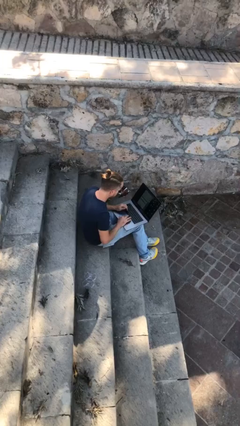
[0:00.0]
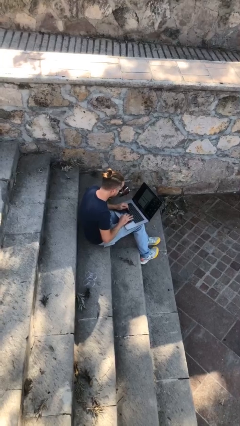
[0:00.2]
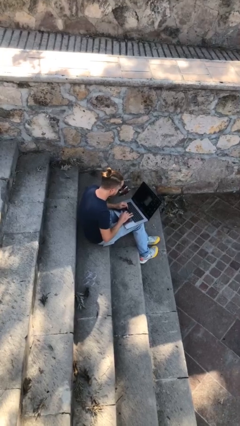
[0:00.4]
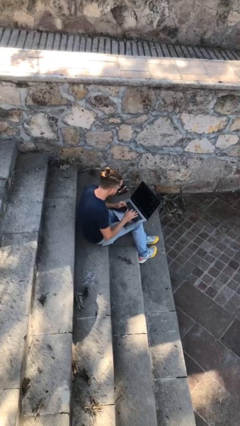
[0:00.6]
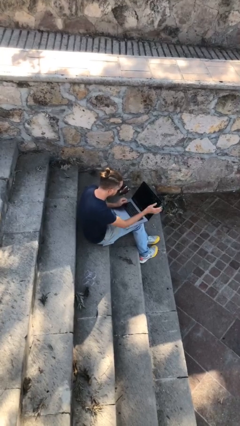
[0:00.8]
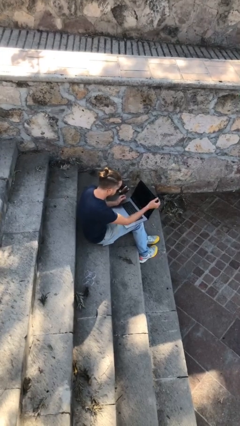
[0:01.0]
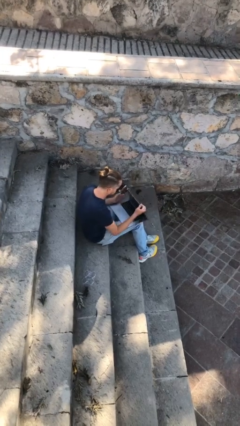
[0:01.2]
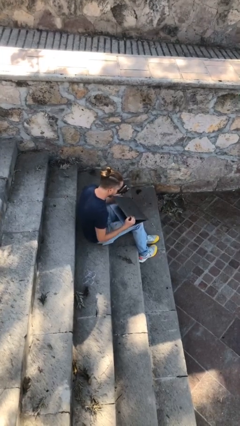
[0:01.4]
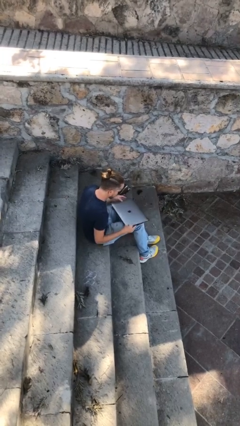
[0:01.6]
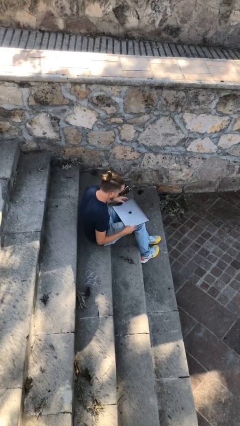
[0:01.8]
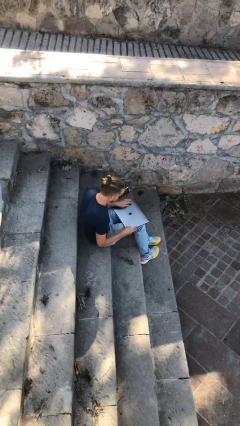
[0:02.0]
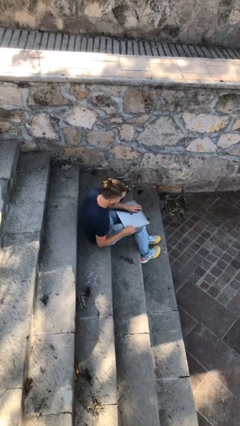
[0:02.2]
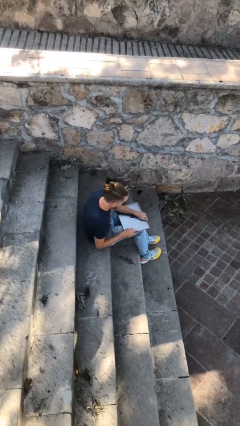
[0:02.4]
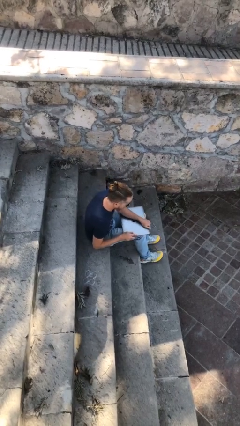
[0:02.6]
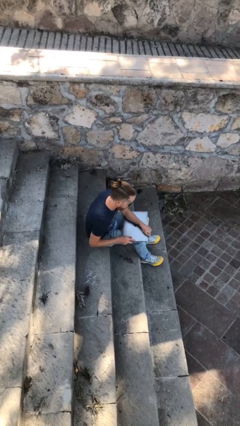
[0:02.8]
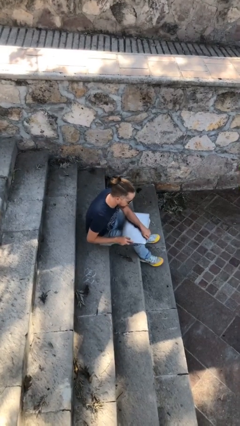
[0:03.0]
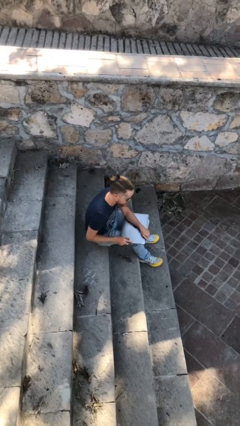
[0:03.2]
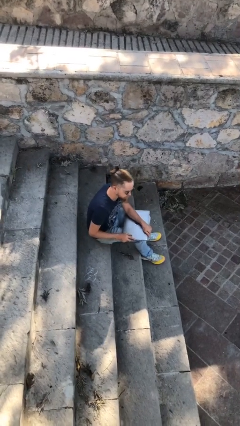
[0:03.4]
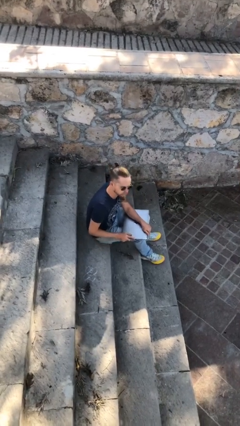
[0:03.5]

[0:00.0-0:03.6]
person interacts with laptop

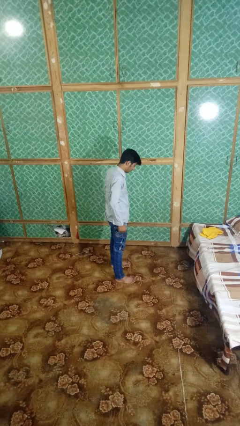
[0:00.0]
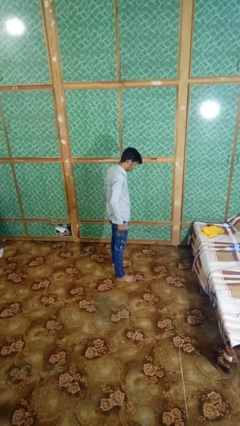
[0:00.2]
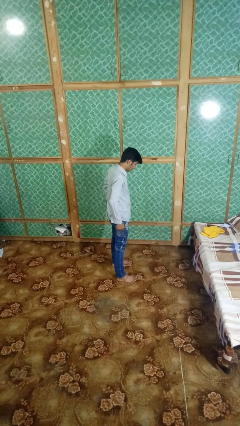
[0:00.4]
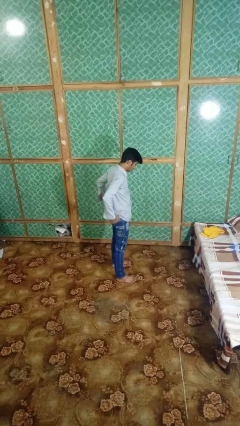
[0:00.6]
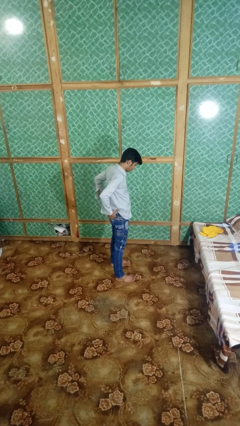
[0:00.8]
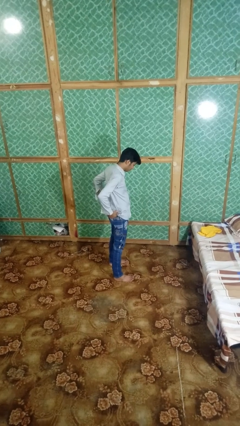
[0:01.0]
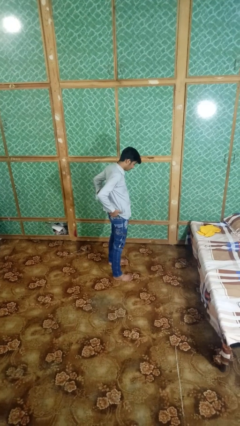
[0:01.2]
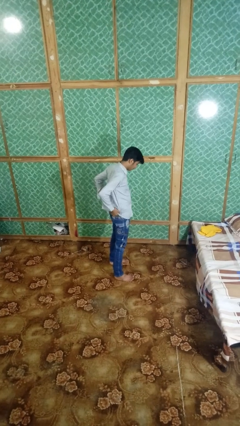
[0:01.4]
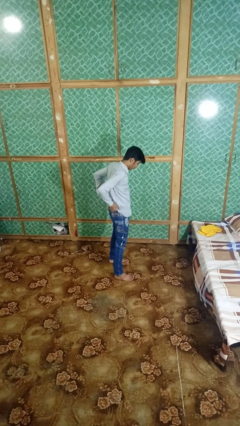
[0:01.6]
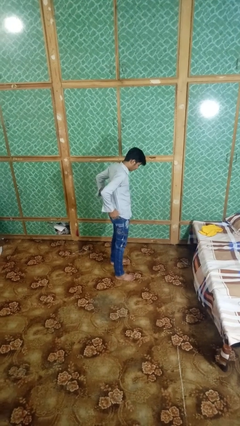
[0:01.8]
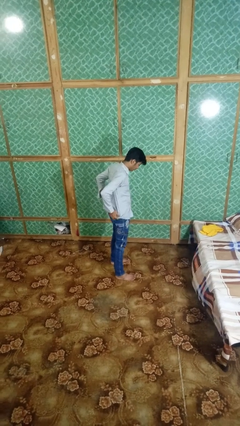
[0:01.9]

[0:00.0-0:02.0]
person hikes up pants

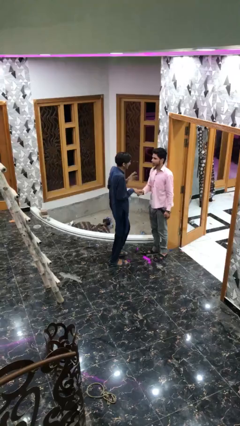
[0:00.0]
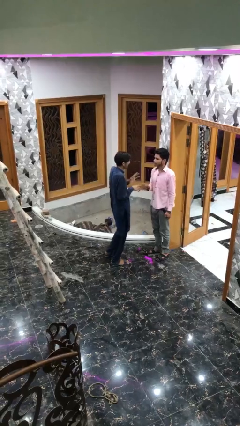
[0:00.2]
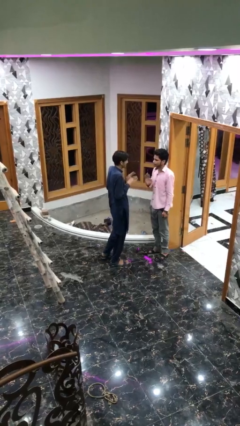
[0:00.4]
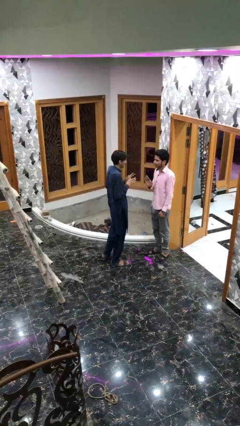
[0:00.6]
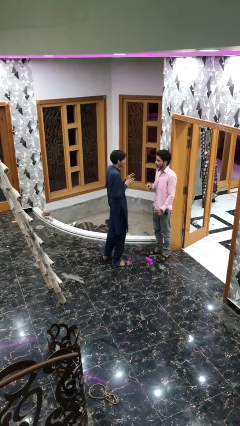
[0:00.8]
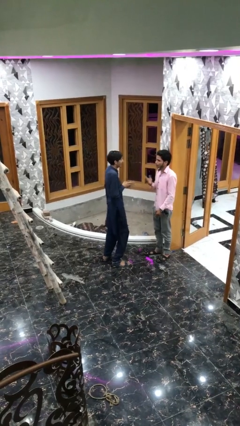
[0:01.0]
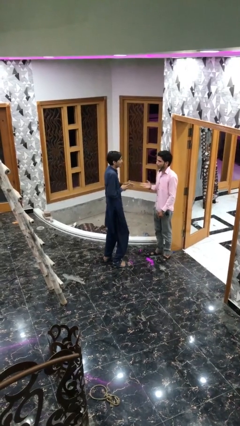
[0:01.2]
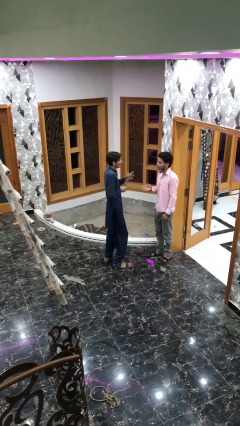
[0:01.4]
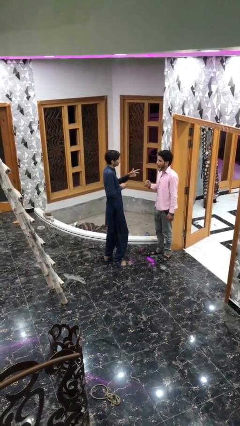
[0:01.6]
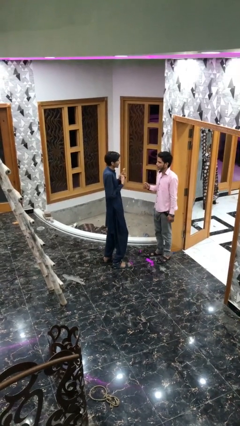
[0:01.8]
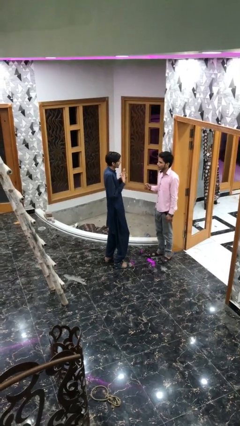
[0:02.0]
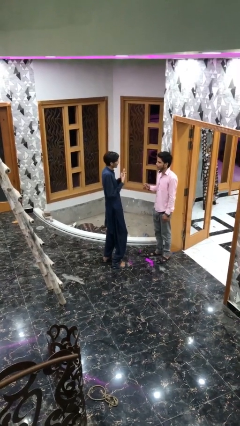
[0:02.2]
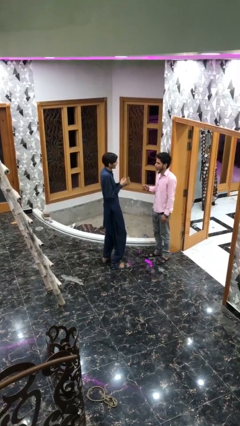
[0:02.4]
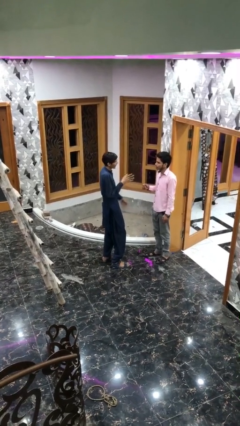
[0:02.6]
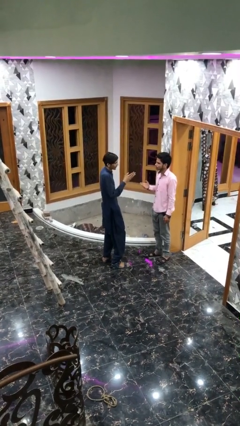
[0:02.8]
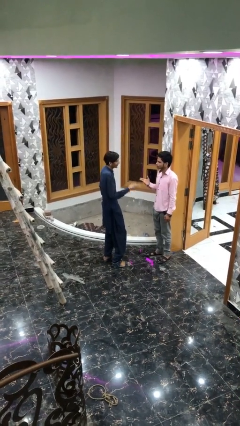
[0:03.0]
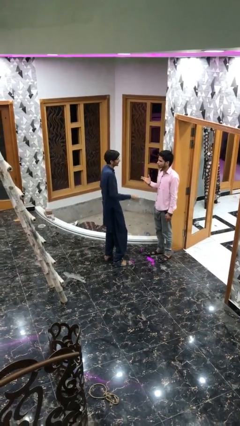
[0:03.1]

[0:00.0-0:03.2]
person talks to person

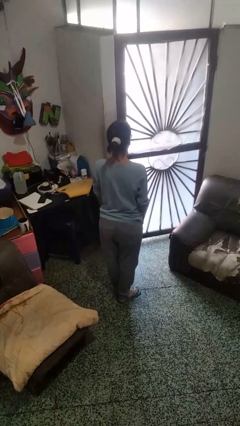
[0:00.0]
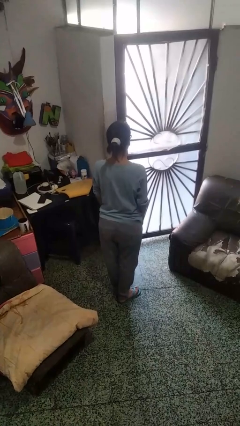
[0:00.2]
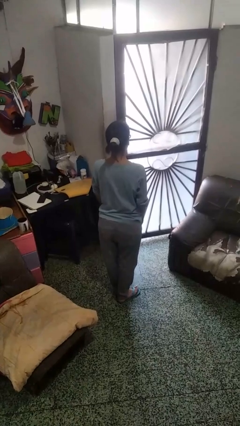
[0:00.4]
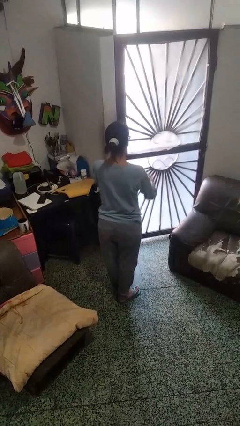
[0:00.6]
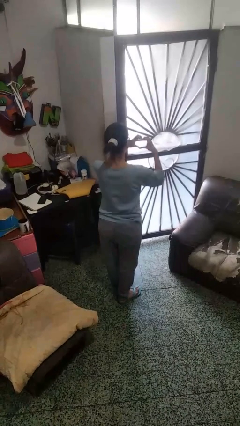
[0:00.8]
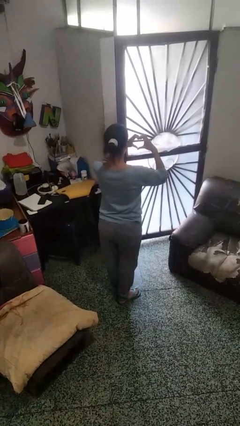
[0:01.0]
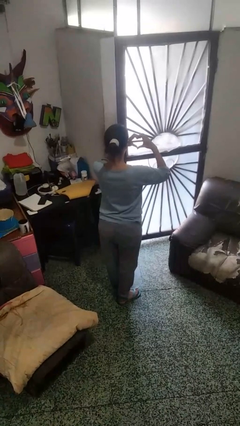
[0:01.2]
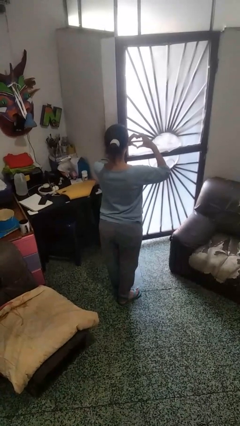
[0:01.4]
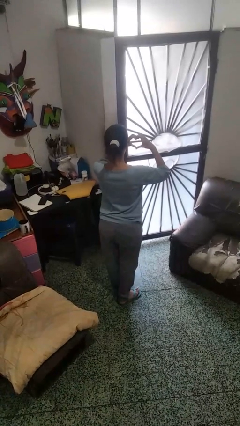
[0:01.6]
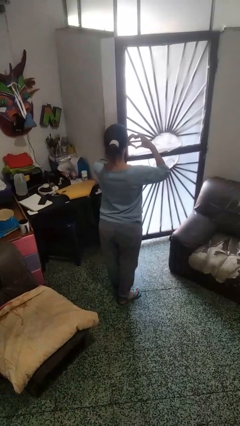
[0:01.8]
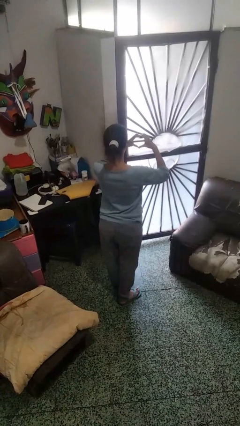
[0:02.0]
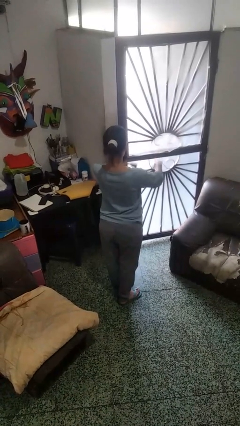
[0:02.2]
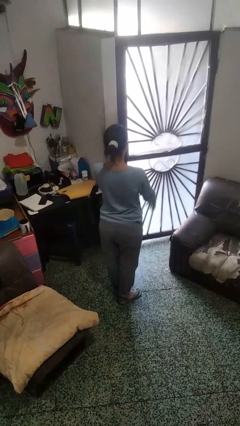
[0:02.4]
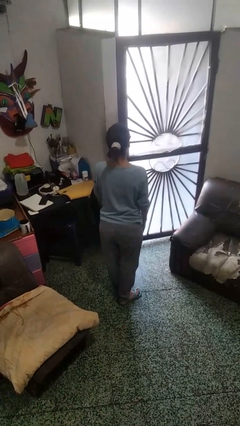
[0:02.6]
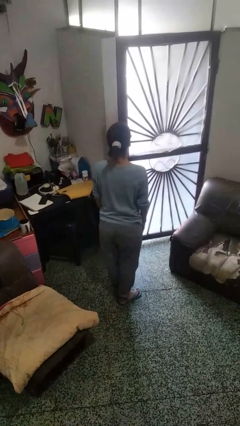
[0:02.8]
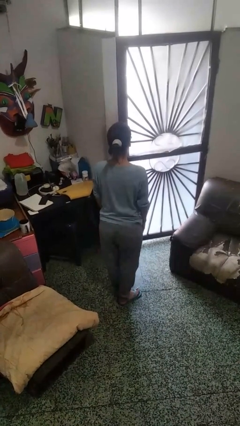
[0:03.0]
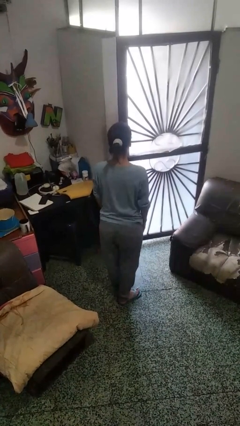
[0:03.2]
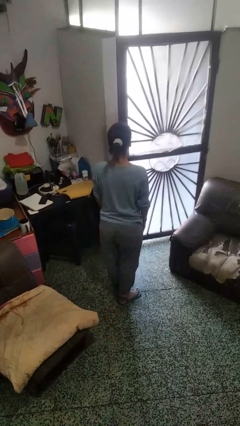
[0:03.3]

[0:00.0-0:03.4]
person gestures heart

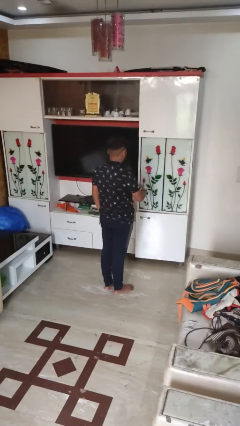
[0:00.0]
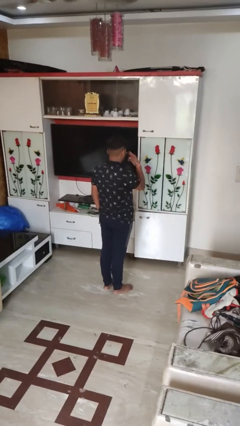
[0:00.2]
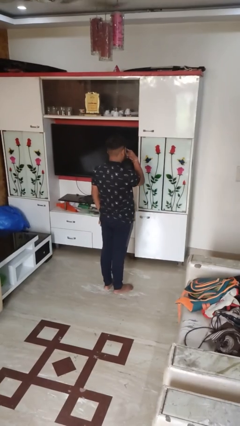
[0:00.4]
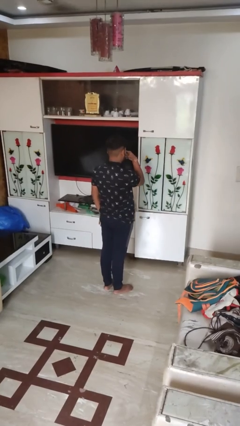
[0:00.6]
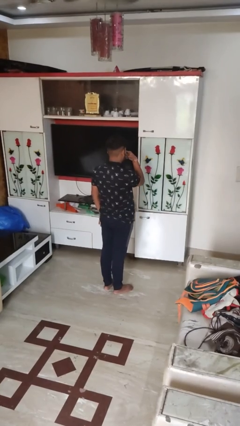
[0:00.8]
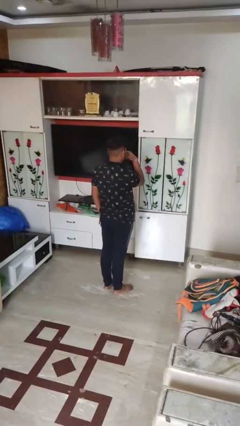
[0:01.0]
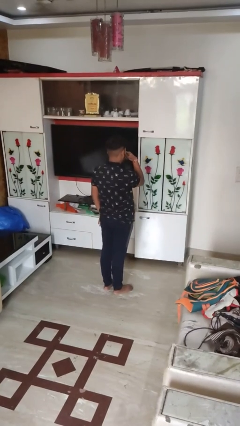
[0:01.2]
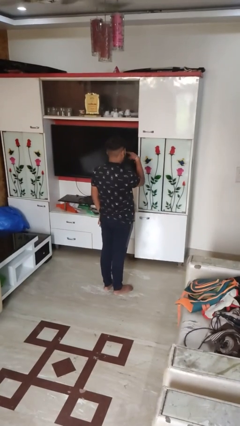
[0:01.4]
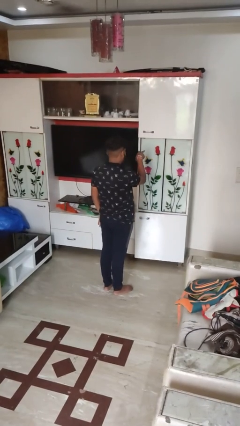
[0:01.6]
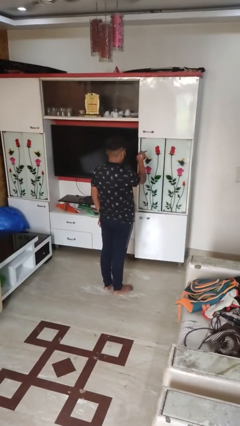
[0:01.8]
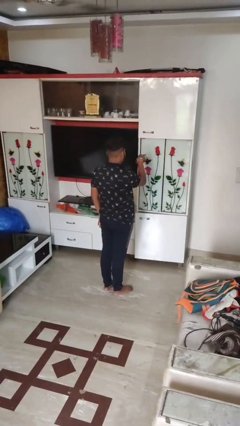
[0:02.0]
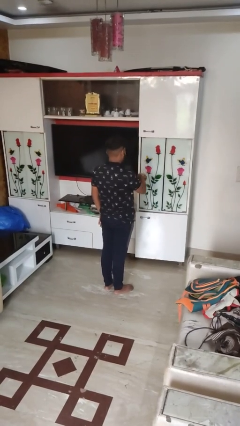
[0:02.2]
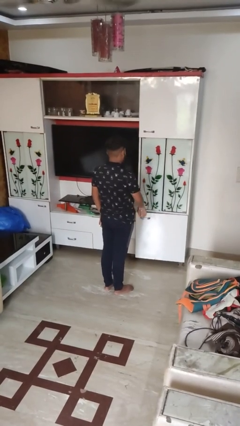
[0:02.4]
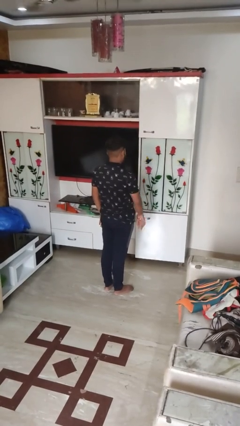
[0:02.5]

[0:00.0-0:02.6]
person gestures watch closely

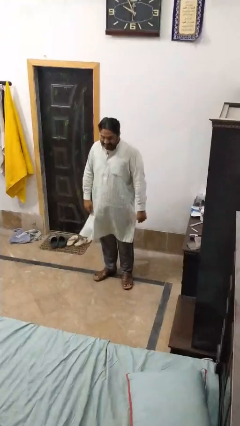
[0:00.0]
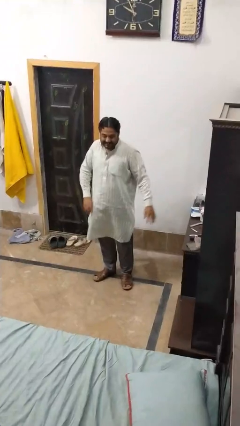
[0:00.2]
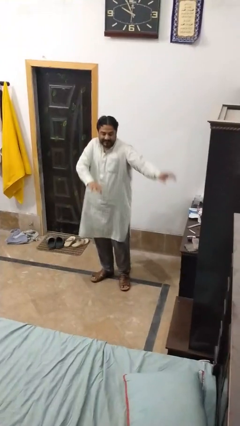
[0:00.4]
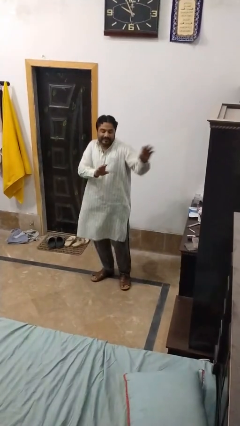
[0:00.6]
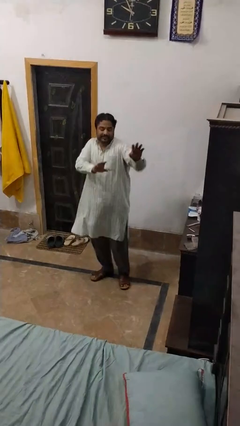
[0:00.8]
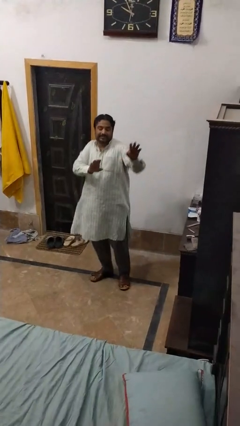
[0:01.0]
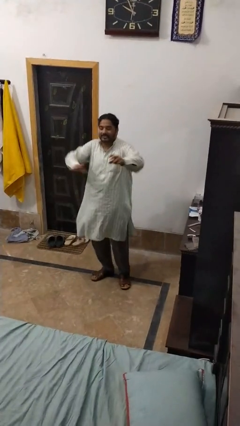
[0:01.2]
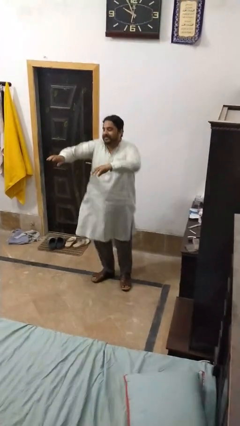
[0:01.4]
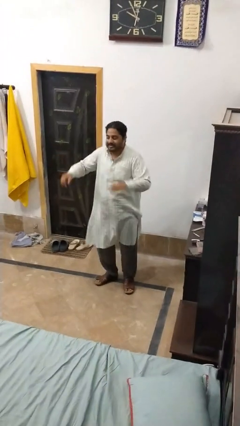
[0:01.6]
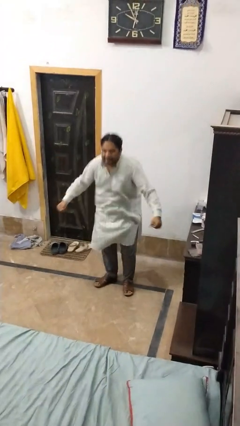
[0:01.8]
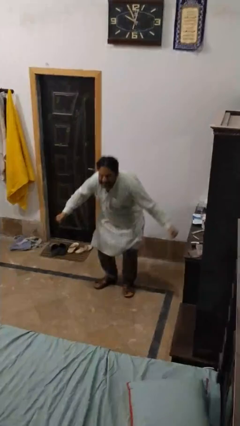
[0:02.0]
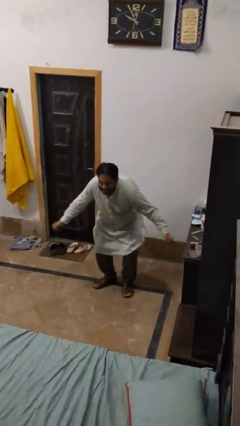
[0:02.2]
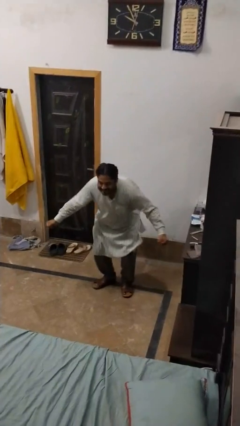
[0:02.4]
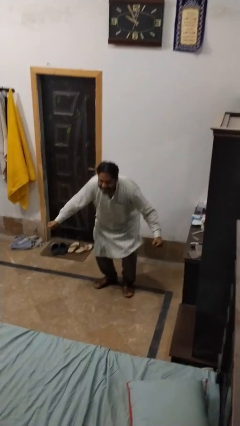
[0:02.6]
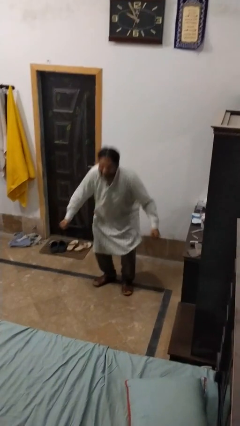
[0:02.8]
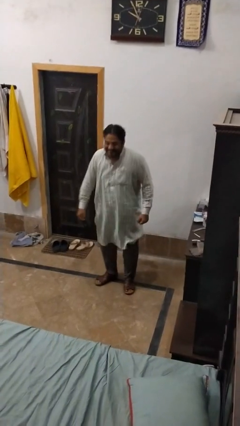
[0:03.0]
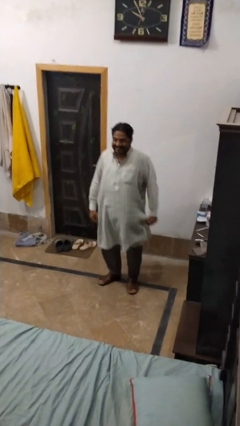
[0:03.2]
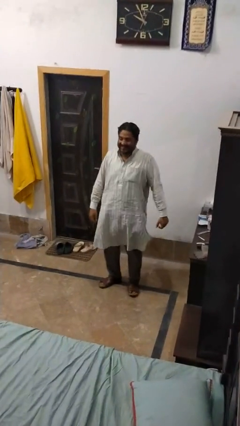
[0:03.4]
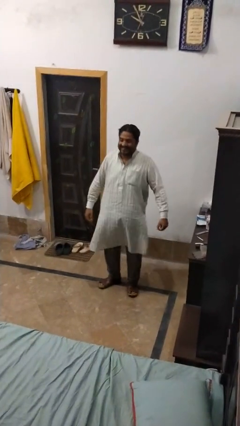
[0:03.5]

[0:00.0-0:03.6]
person dances in place
